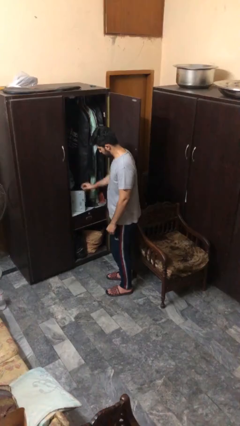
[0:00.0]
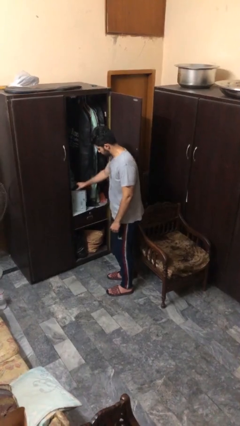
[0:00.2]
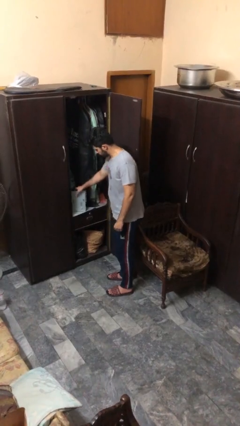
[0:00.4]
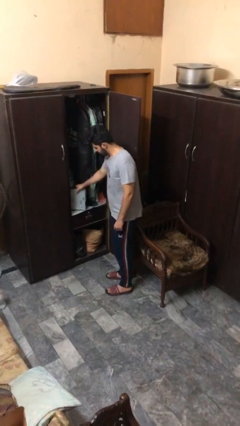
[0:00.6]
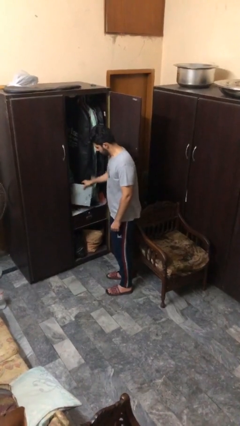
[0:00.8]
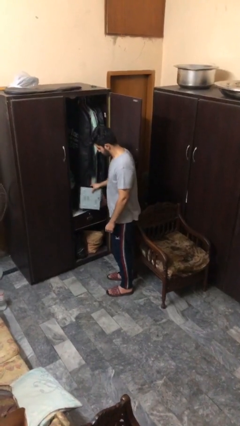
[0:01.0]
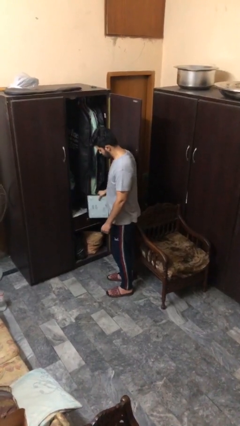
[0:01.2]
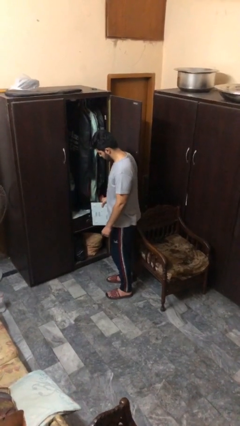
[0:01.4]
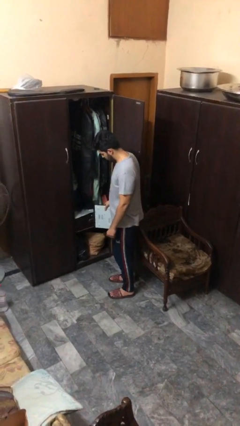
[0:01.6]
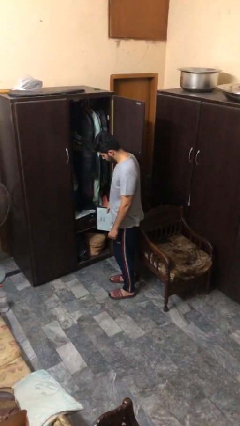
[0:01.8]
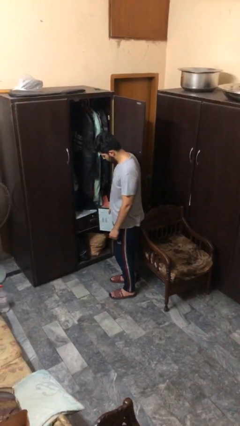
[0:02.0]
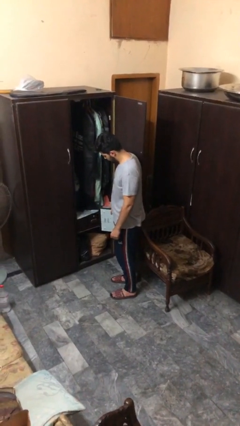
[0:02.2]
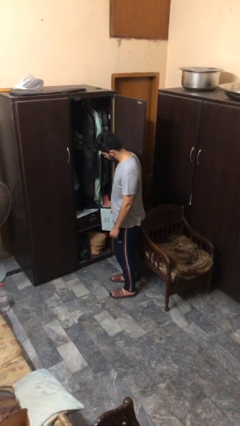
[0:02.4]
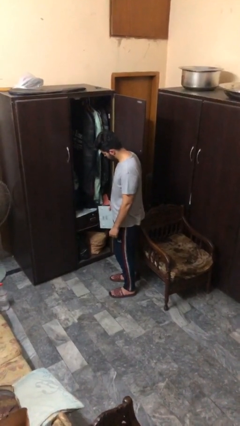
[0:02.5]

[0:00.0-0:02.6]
person picks up object from cabinet

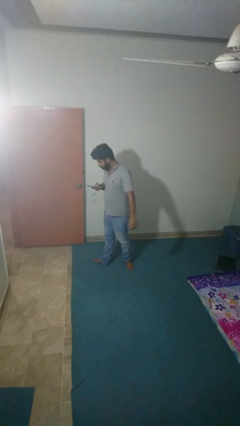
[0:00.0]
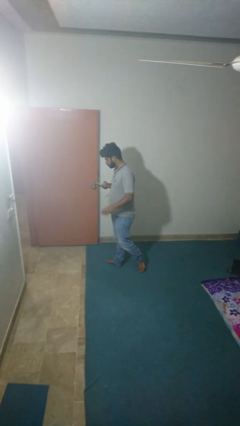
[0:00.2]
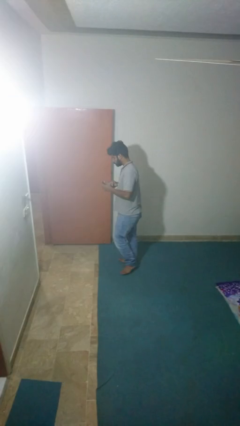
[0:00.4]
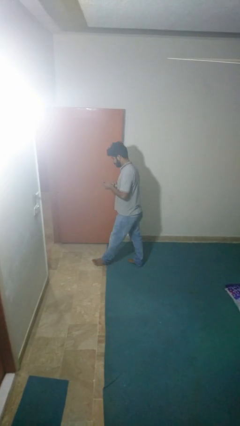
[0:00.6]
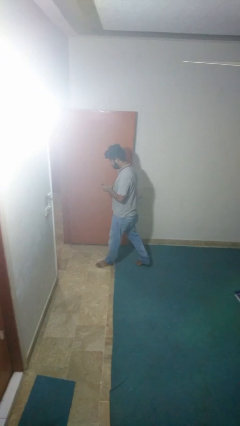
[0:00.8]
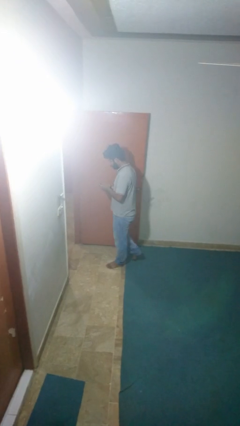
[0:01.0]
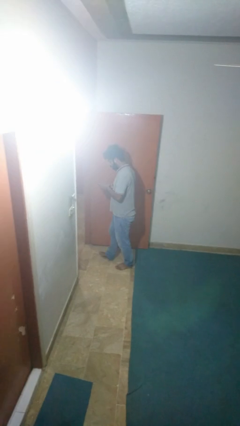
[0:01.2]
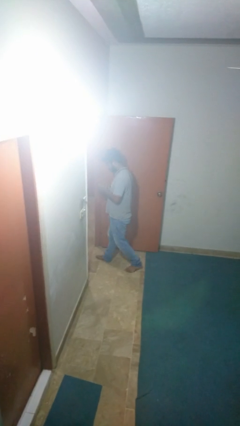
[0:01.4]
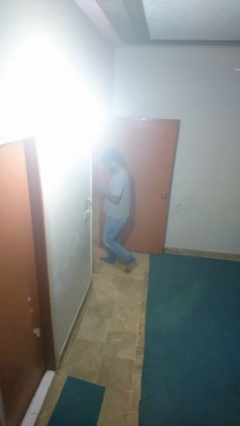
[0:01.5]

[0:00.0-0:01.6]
person exits scene through structure

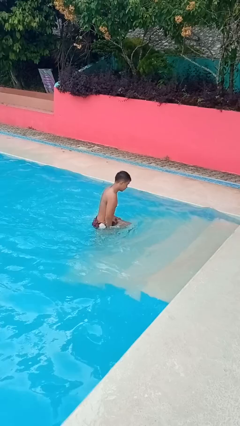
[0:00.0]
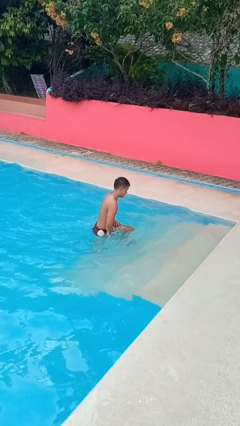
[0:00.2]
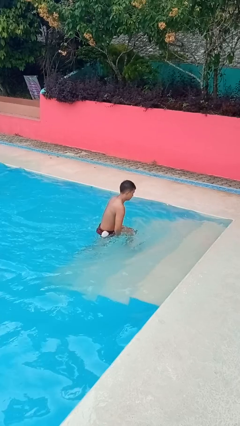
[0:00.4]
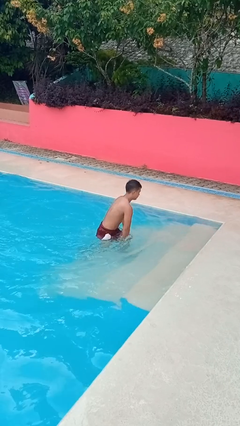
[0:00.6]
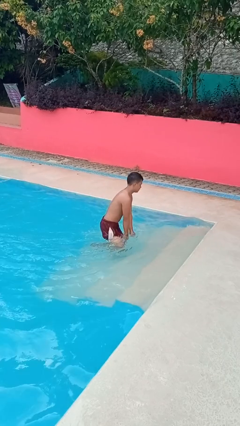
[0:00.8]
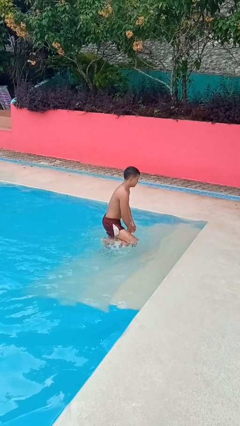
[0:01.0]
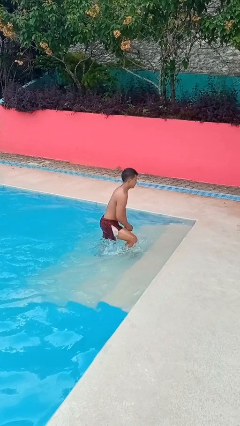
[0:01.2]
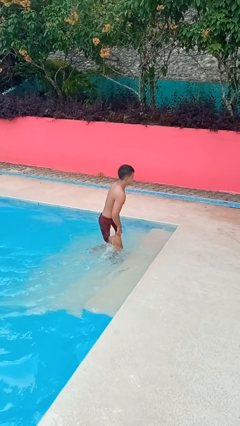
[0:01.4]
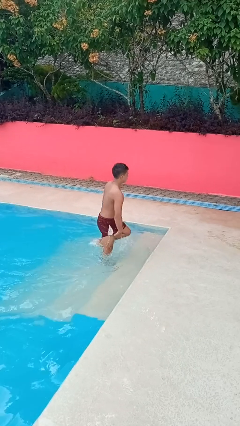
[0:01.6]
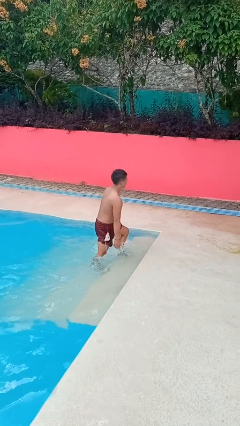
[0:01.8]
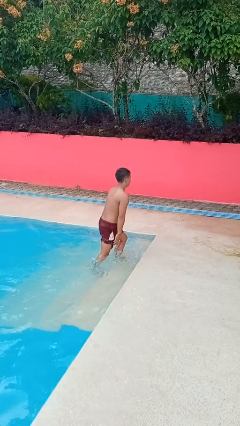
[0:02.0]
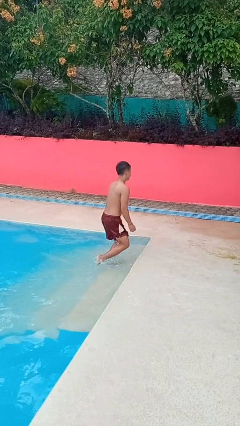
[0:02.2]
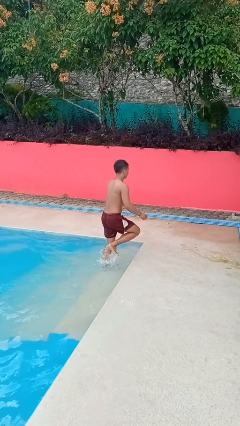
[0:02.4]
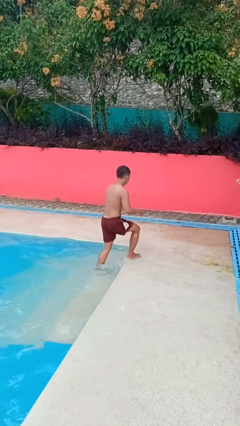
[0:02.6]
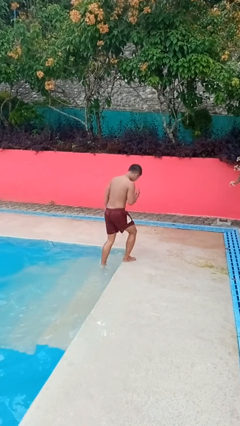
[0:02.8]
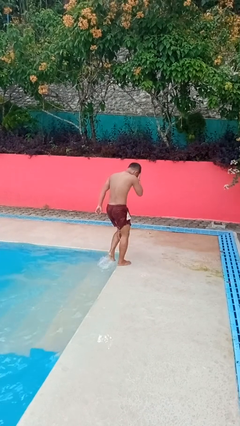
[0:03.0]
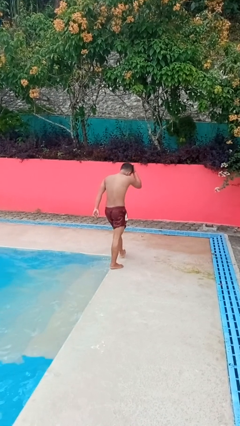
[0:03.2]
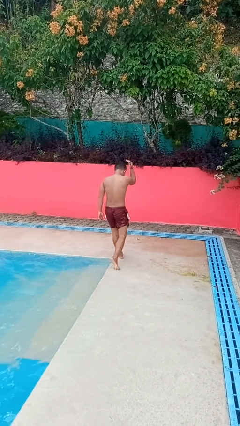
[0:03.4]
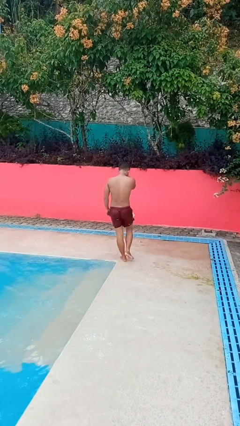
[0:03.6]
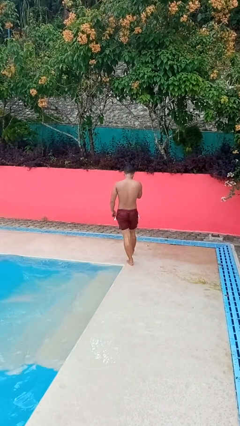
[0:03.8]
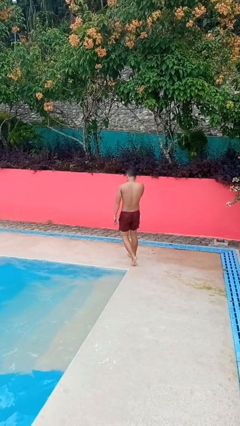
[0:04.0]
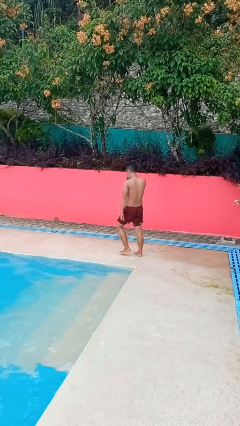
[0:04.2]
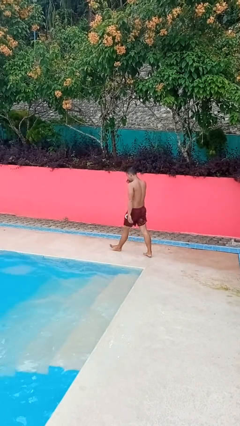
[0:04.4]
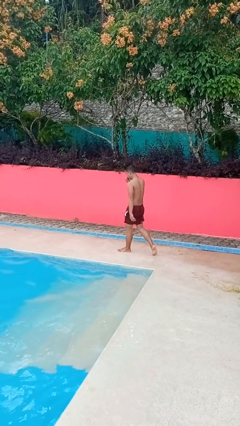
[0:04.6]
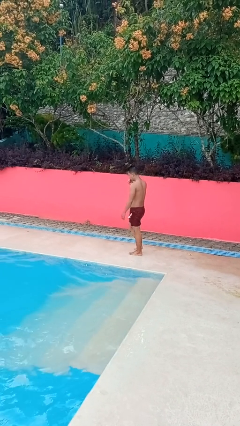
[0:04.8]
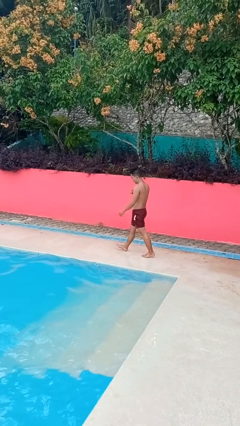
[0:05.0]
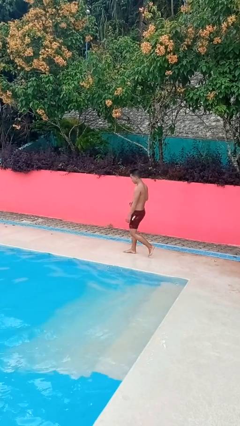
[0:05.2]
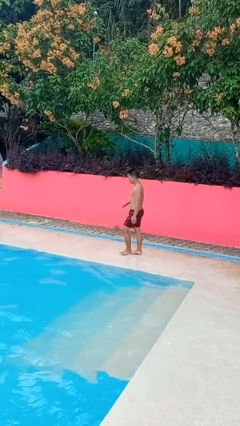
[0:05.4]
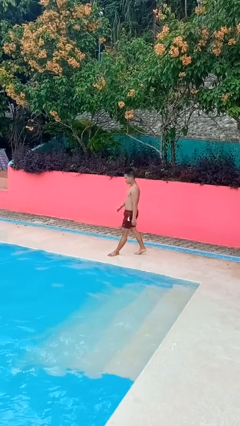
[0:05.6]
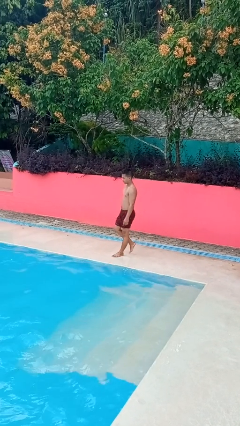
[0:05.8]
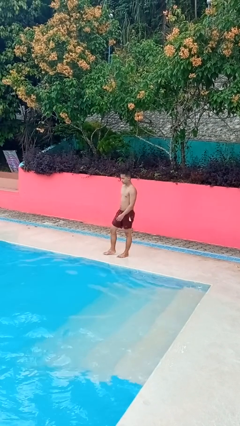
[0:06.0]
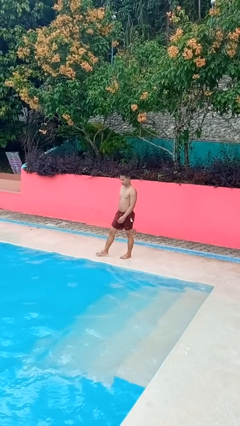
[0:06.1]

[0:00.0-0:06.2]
person exits pool

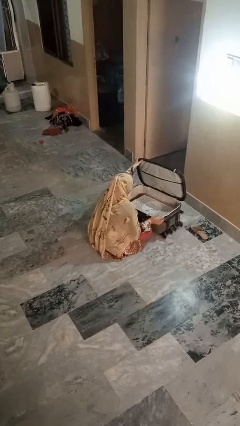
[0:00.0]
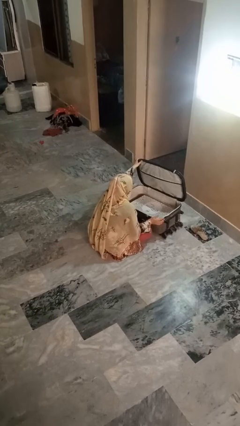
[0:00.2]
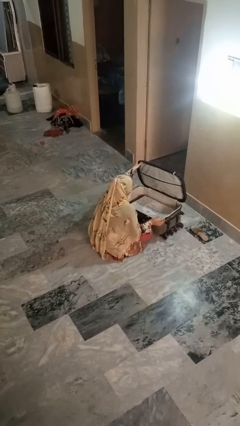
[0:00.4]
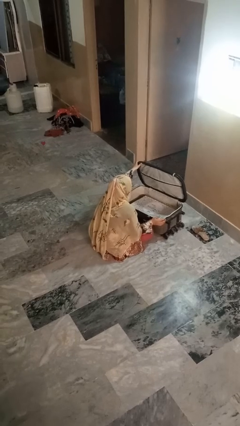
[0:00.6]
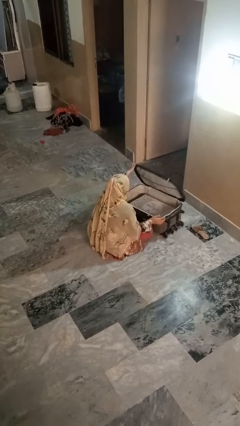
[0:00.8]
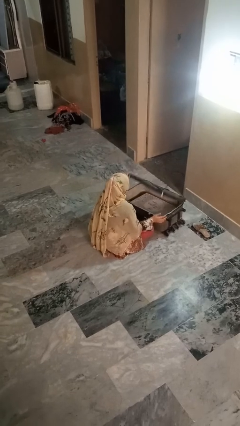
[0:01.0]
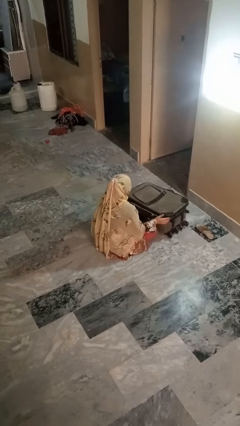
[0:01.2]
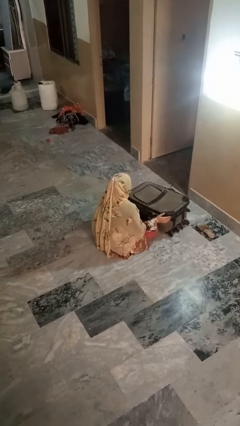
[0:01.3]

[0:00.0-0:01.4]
person closes suitcase

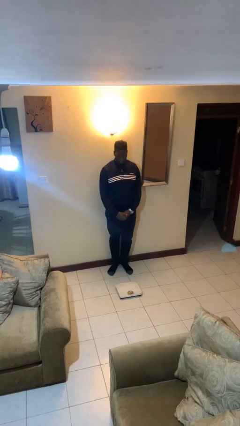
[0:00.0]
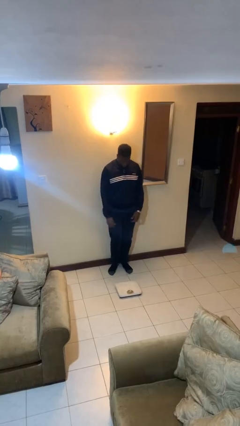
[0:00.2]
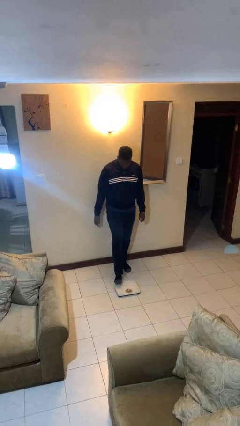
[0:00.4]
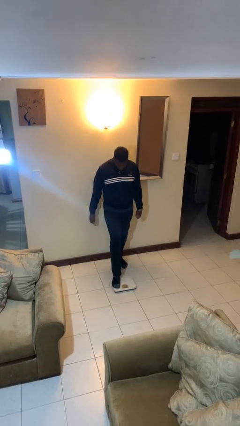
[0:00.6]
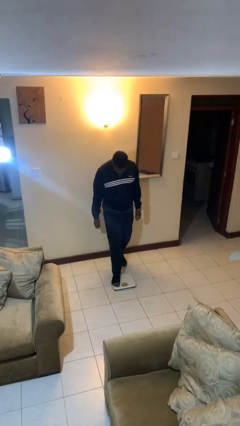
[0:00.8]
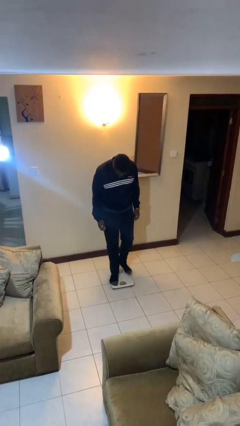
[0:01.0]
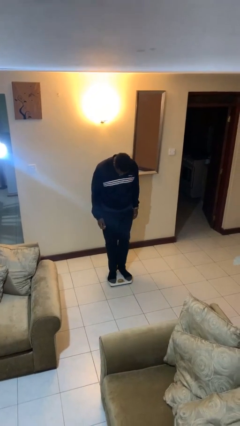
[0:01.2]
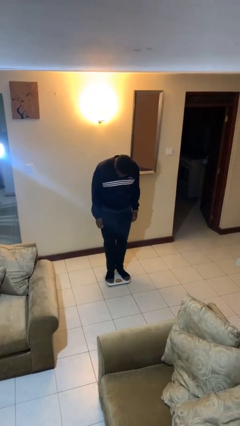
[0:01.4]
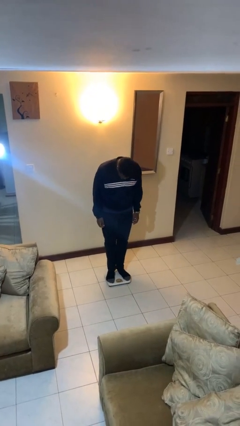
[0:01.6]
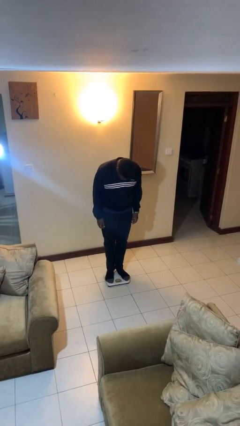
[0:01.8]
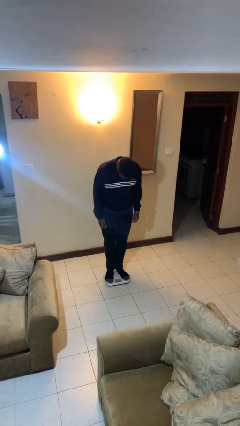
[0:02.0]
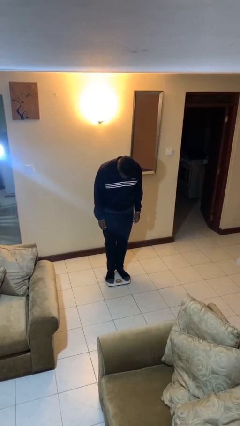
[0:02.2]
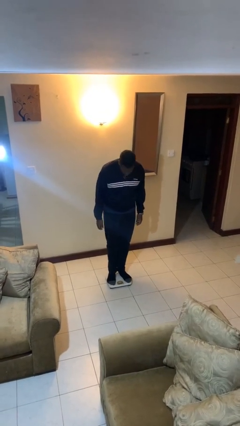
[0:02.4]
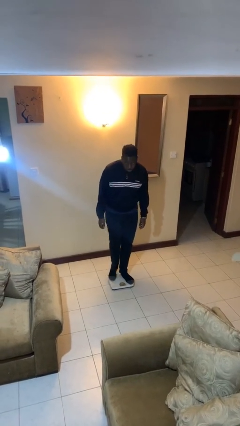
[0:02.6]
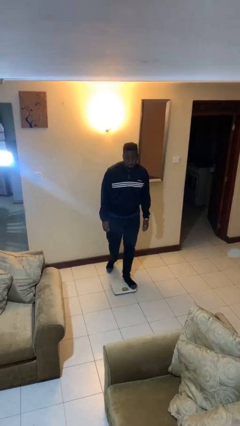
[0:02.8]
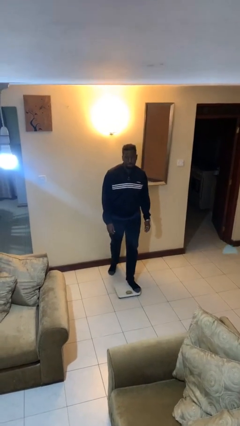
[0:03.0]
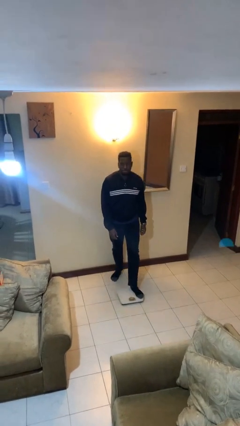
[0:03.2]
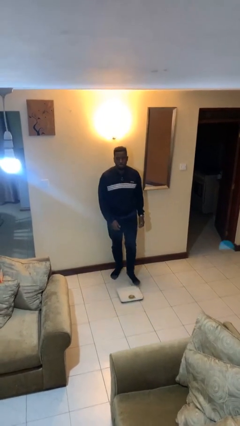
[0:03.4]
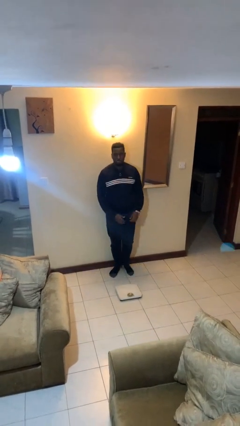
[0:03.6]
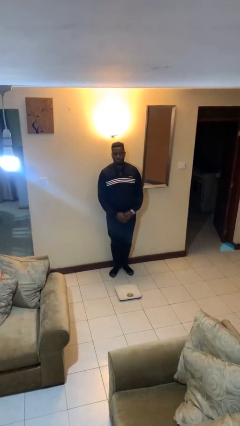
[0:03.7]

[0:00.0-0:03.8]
person uses bodyweight scale

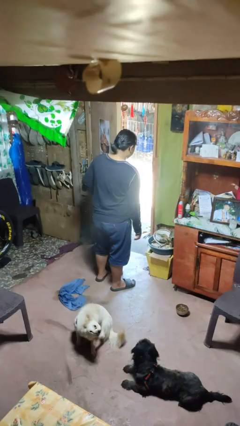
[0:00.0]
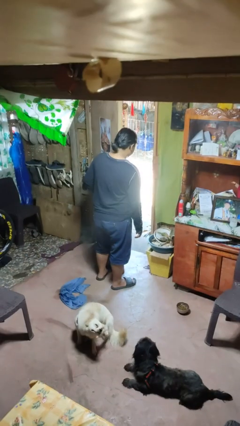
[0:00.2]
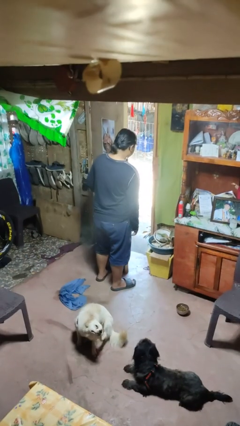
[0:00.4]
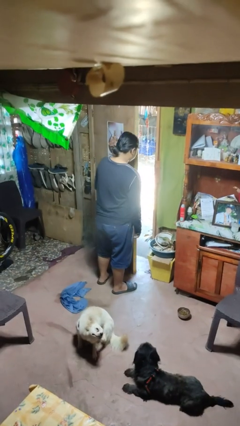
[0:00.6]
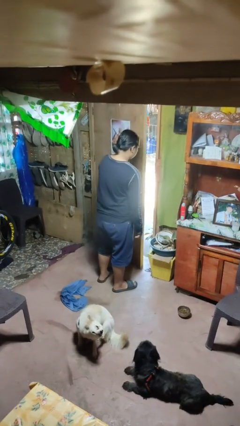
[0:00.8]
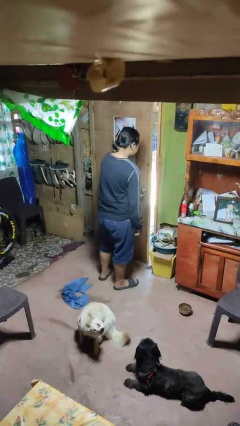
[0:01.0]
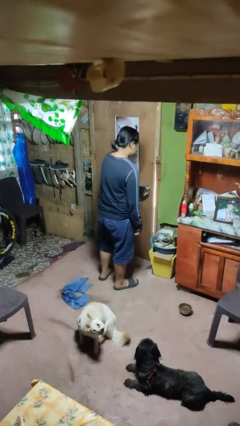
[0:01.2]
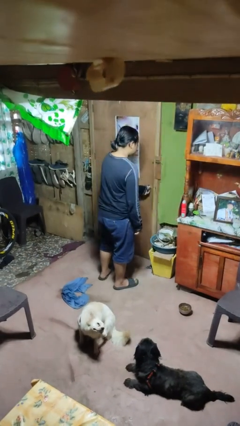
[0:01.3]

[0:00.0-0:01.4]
person closes facility door

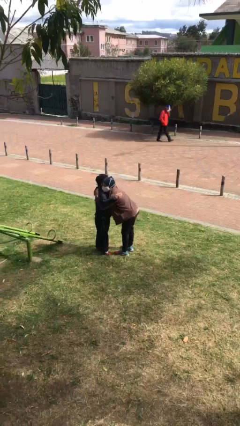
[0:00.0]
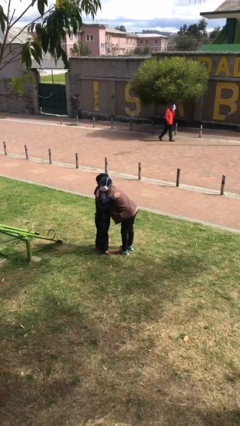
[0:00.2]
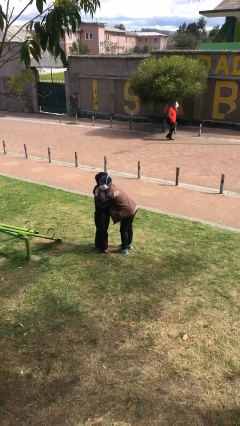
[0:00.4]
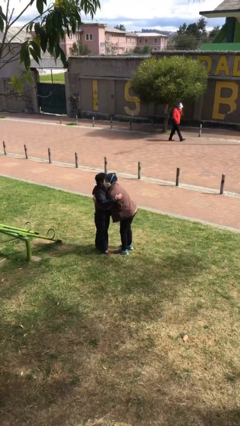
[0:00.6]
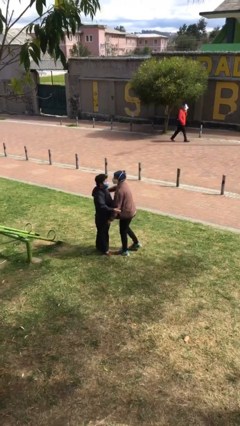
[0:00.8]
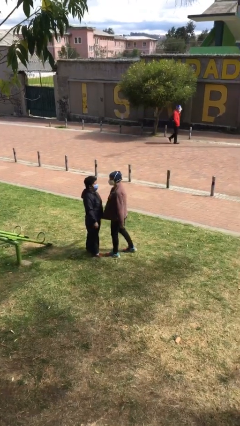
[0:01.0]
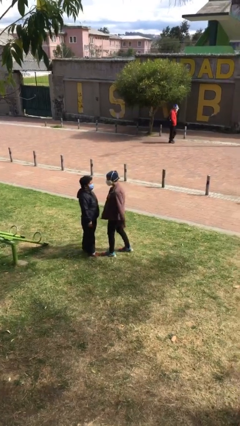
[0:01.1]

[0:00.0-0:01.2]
person embraces person
